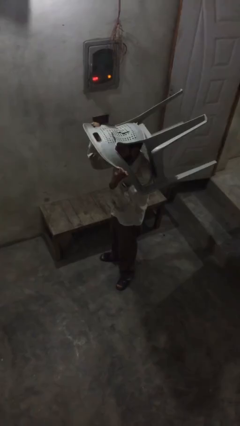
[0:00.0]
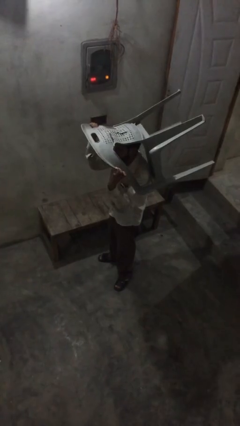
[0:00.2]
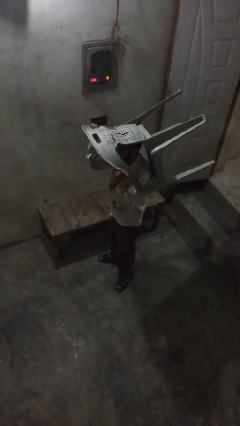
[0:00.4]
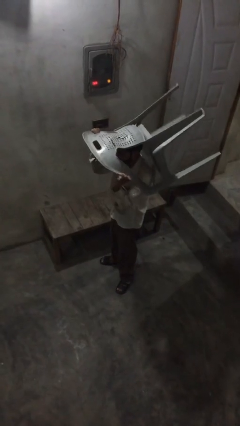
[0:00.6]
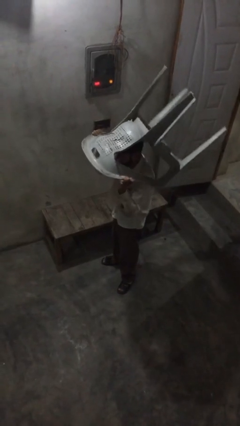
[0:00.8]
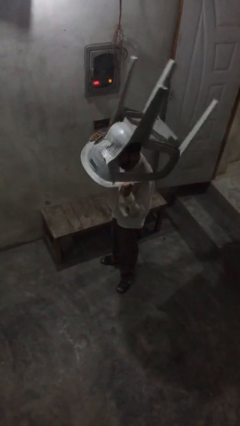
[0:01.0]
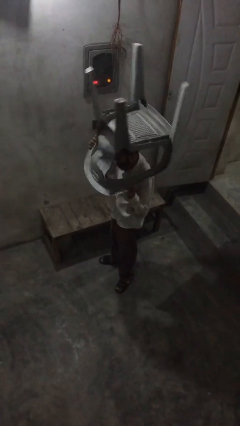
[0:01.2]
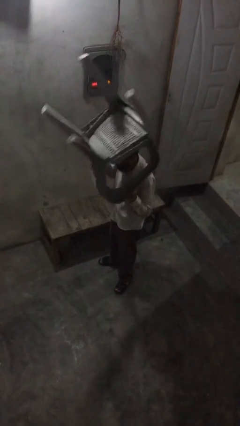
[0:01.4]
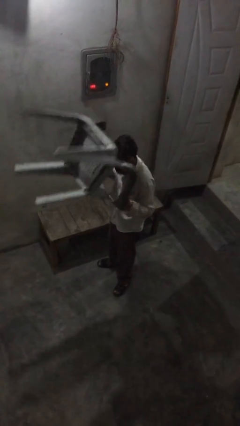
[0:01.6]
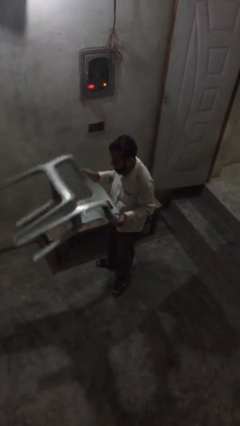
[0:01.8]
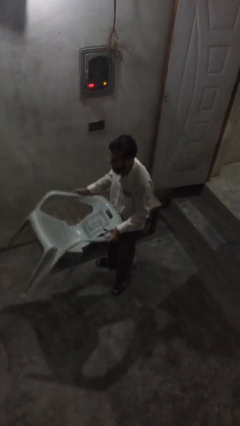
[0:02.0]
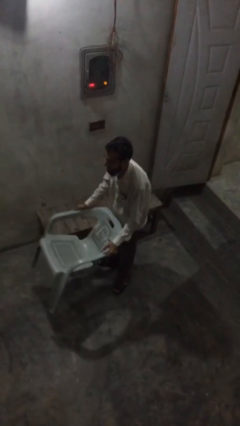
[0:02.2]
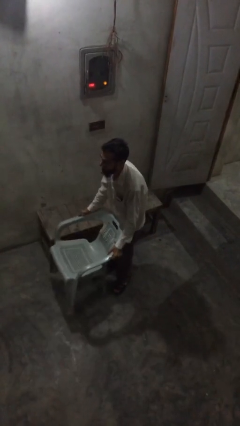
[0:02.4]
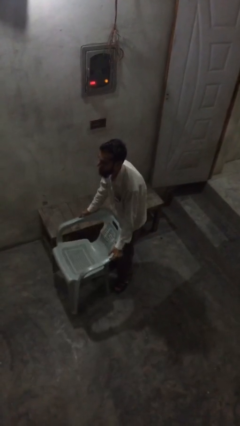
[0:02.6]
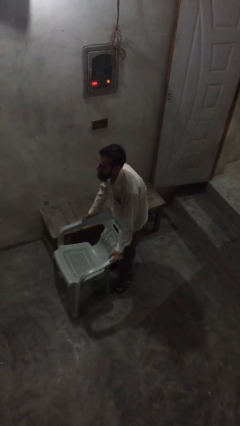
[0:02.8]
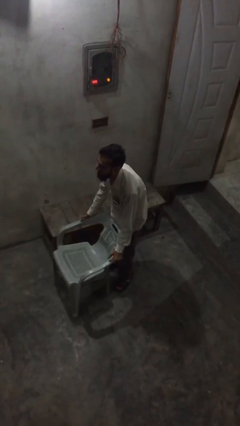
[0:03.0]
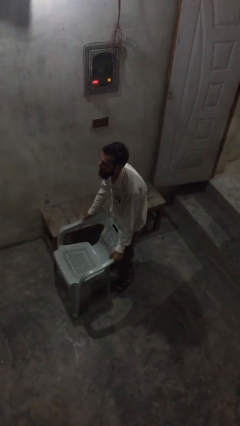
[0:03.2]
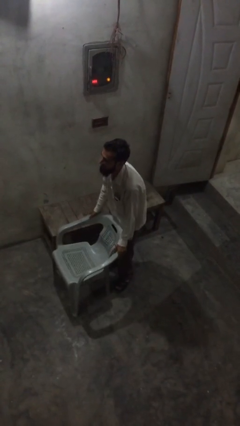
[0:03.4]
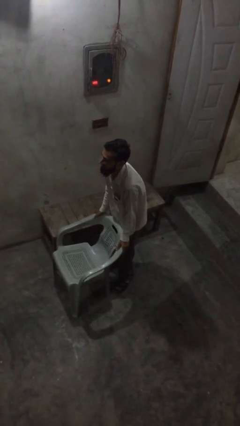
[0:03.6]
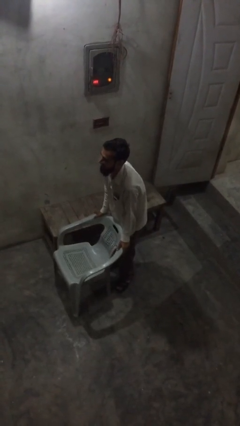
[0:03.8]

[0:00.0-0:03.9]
person puts down object on floor

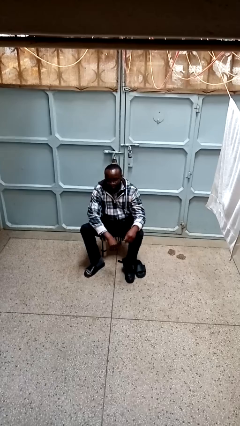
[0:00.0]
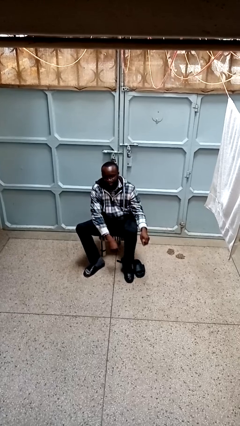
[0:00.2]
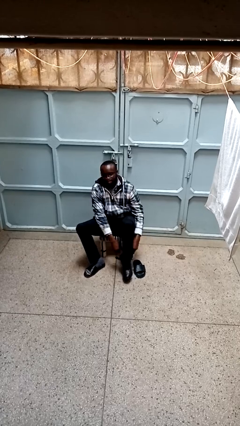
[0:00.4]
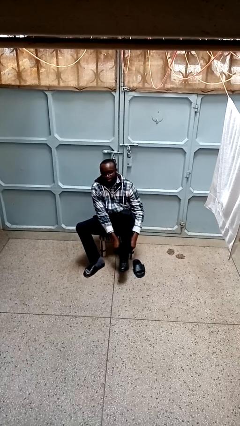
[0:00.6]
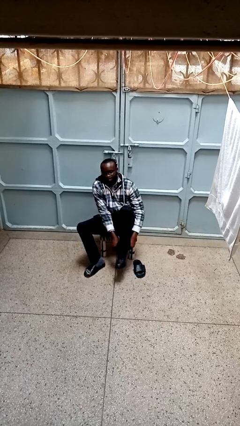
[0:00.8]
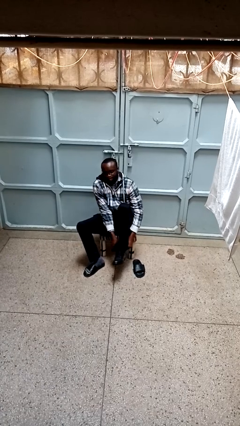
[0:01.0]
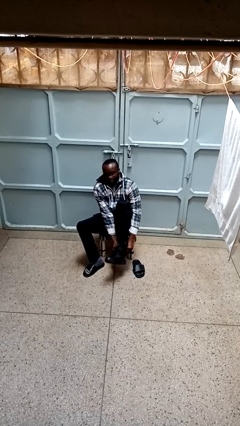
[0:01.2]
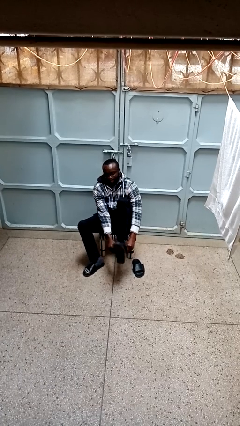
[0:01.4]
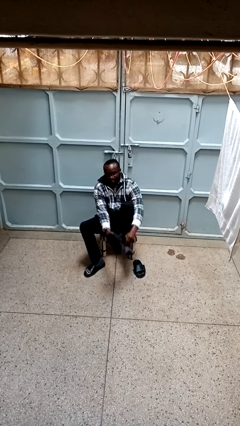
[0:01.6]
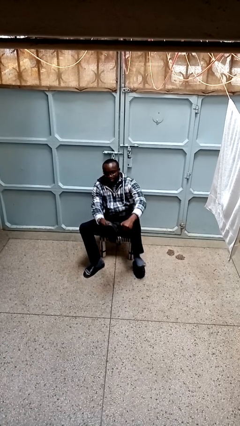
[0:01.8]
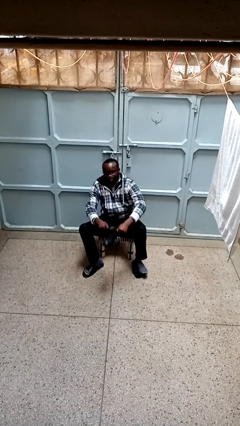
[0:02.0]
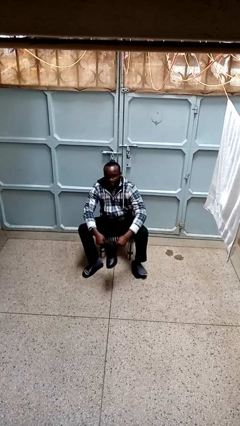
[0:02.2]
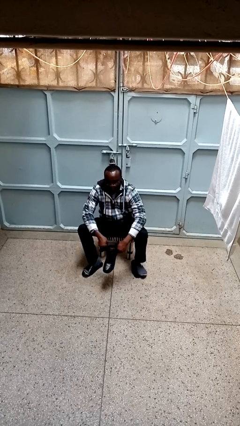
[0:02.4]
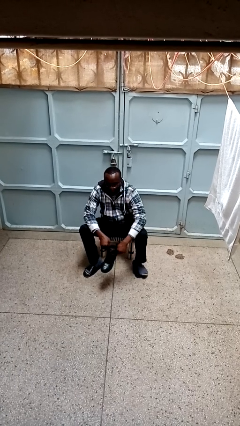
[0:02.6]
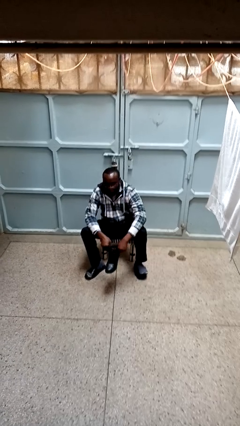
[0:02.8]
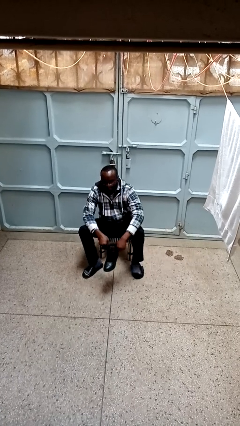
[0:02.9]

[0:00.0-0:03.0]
person takes off boots

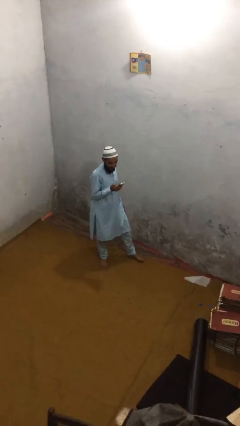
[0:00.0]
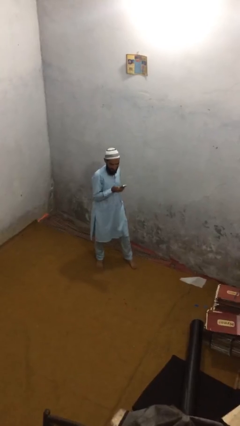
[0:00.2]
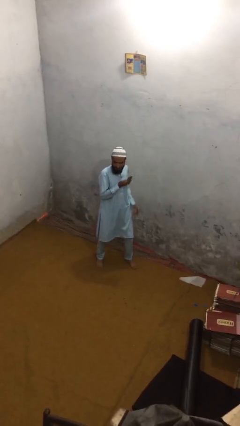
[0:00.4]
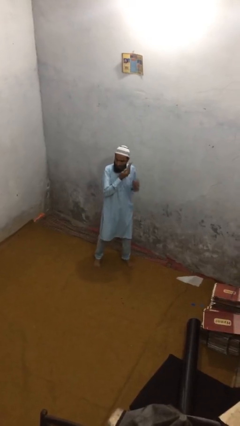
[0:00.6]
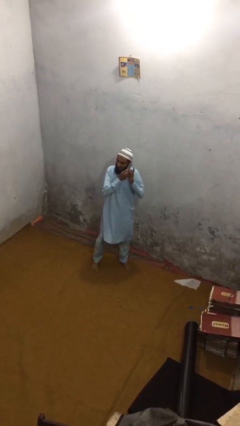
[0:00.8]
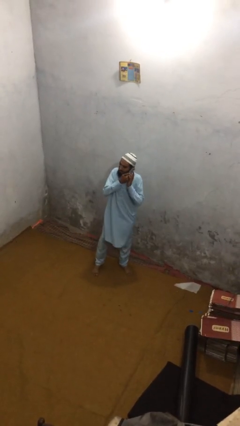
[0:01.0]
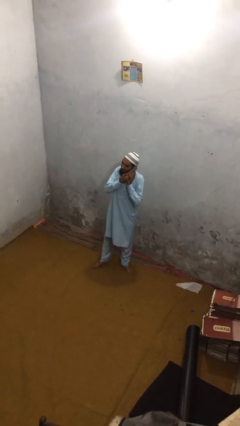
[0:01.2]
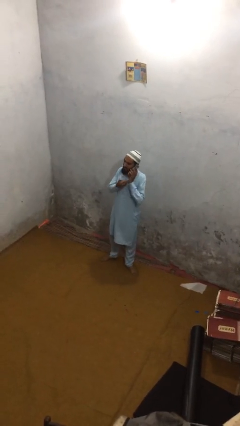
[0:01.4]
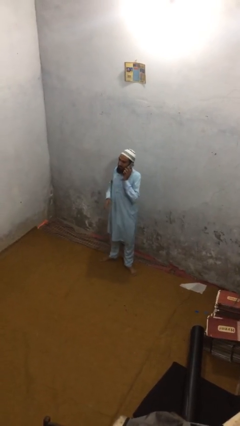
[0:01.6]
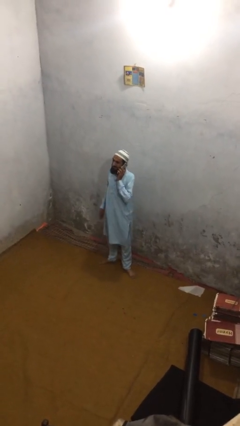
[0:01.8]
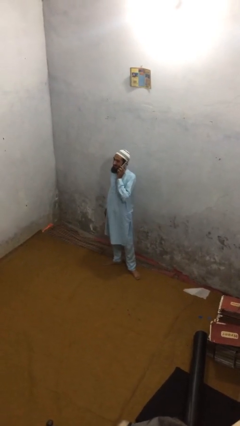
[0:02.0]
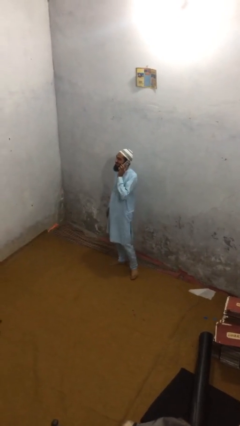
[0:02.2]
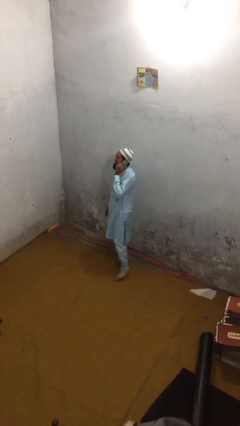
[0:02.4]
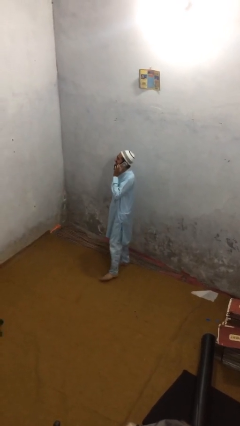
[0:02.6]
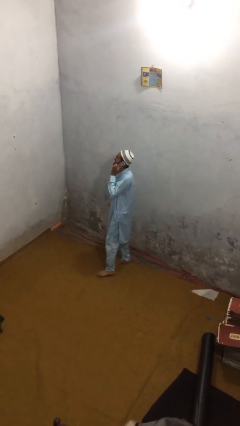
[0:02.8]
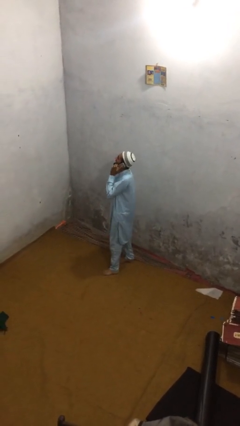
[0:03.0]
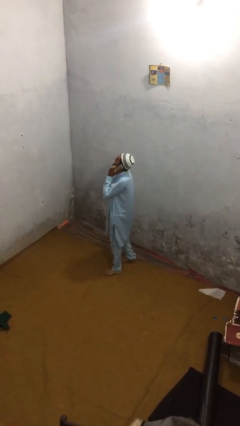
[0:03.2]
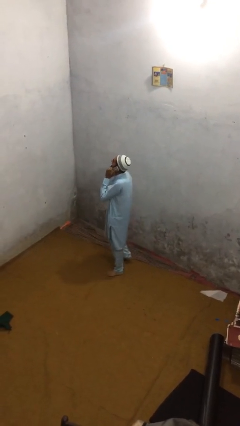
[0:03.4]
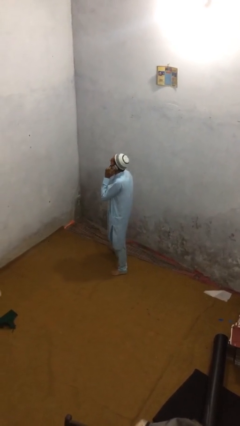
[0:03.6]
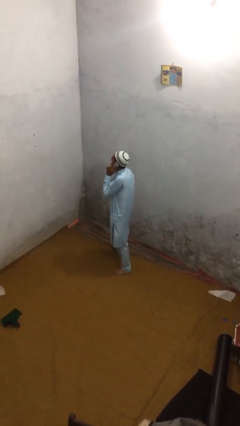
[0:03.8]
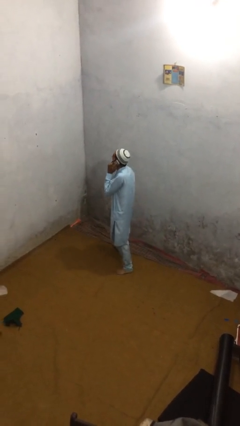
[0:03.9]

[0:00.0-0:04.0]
person talks on phone

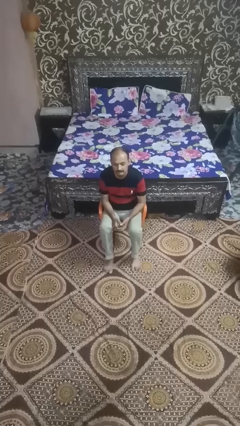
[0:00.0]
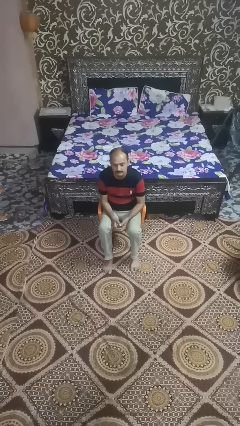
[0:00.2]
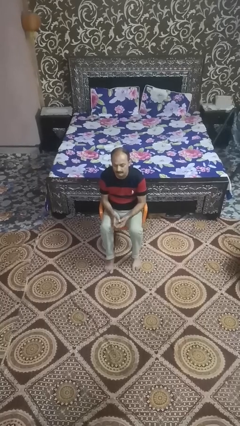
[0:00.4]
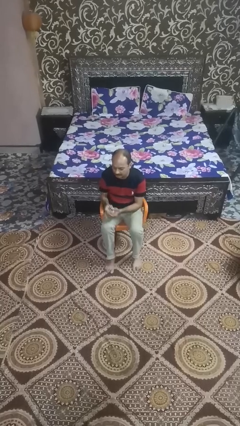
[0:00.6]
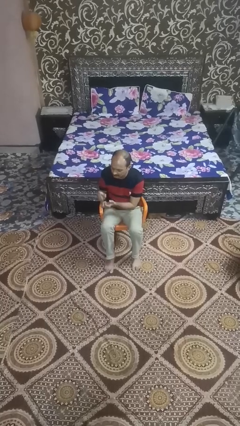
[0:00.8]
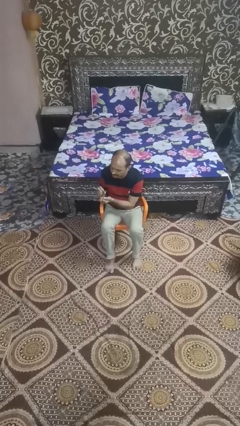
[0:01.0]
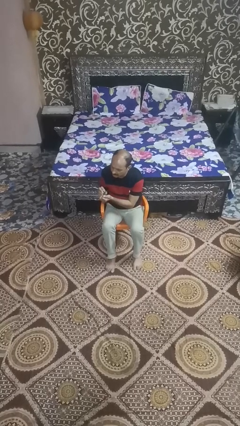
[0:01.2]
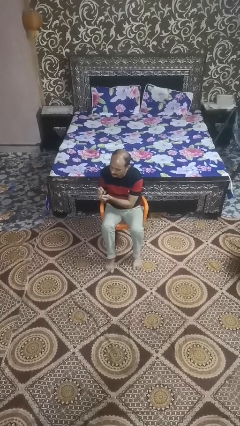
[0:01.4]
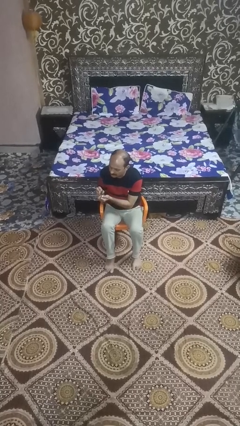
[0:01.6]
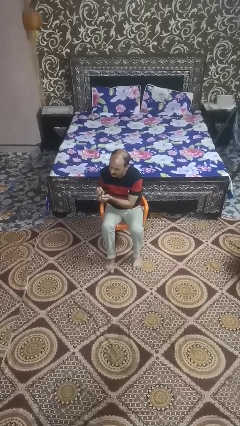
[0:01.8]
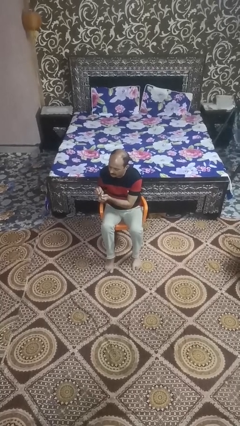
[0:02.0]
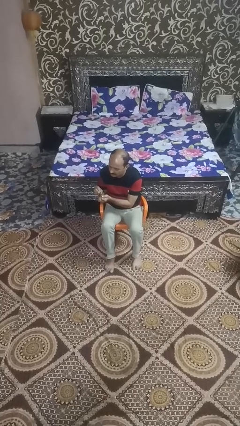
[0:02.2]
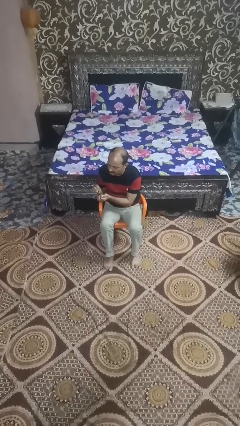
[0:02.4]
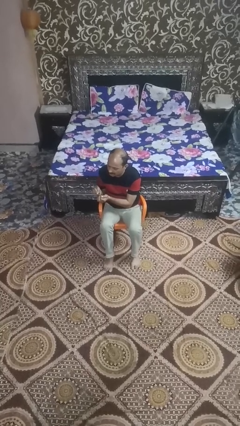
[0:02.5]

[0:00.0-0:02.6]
person clips fingernails

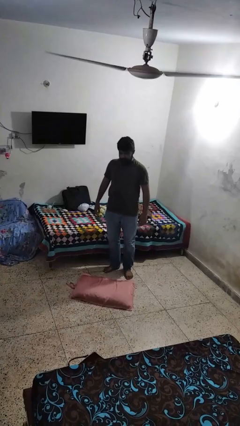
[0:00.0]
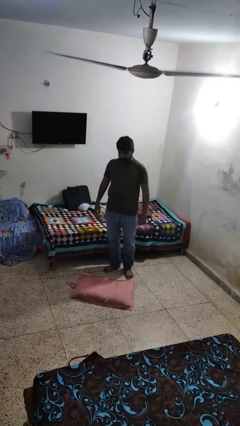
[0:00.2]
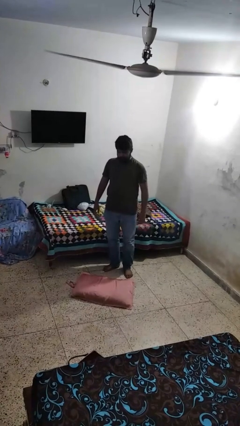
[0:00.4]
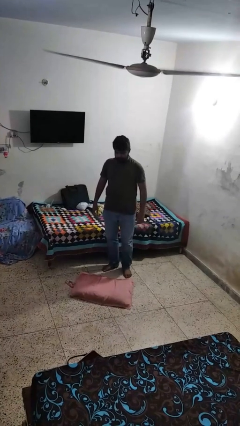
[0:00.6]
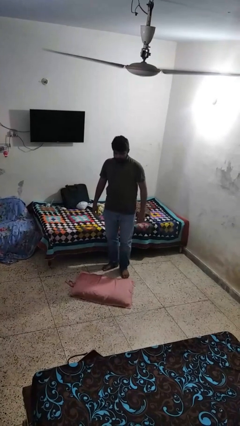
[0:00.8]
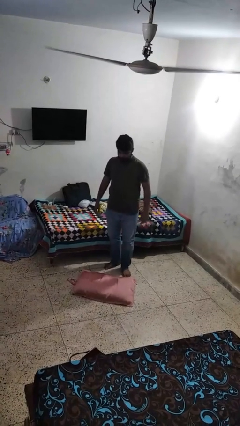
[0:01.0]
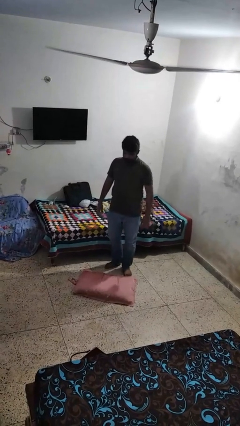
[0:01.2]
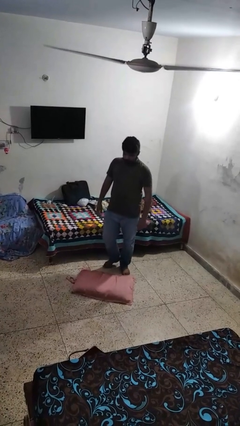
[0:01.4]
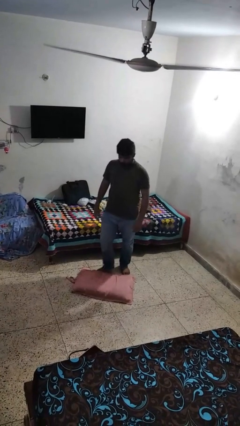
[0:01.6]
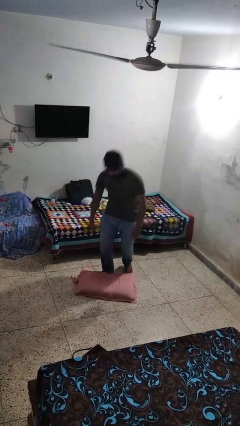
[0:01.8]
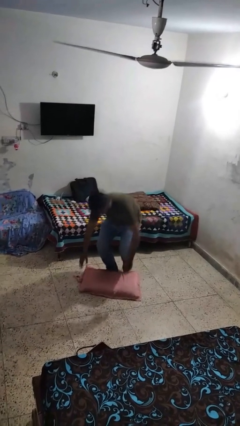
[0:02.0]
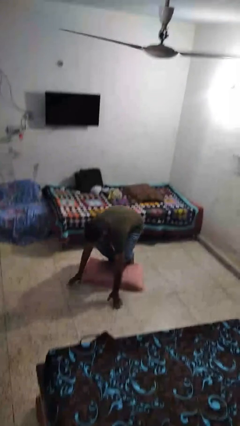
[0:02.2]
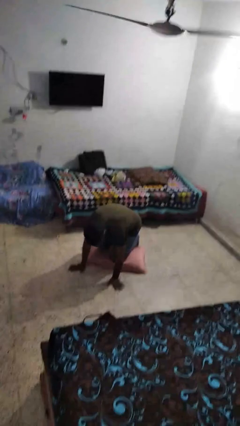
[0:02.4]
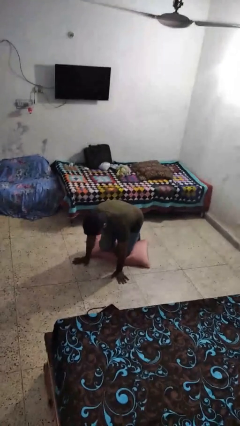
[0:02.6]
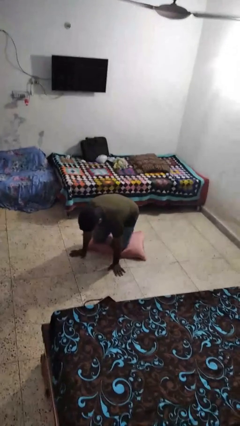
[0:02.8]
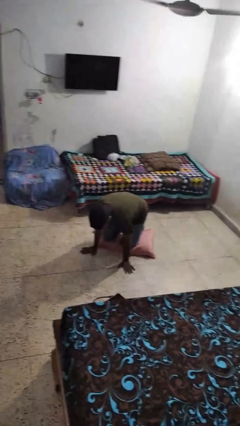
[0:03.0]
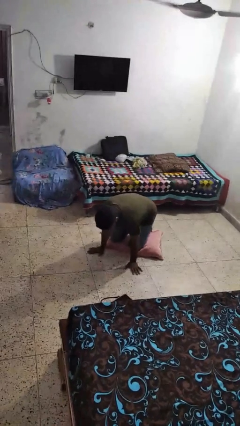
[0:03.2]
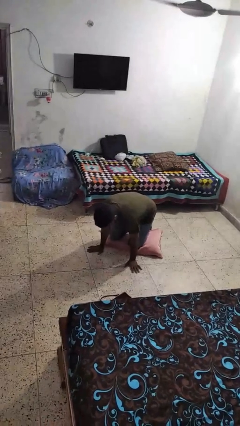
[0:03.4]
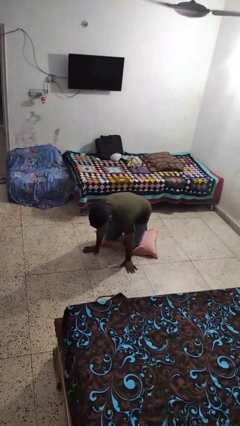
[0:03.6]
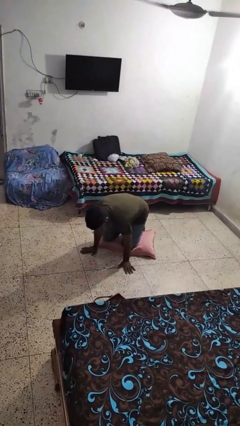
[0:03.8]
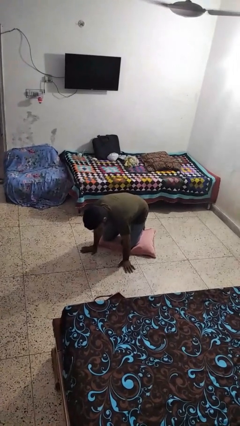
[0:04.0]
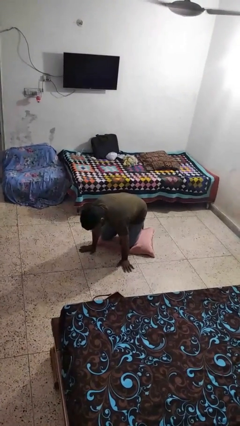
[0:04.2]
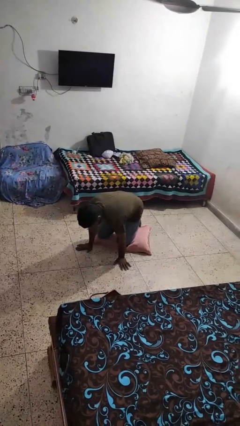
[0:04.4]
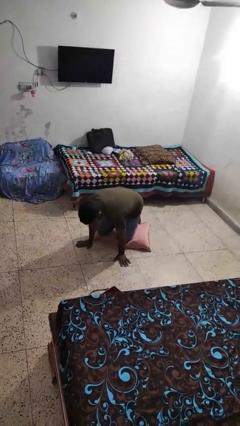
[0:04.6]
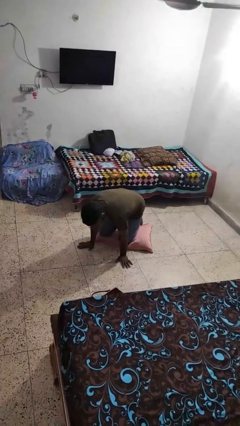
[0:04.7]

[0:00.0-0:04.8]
person trips on object on floor
